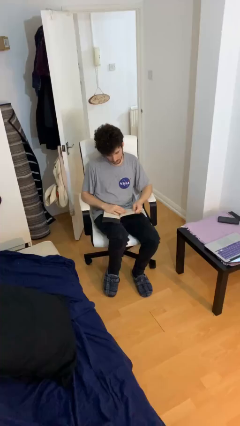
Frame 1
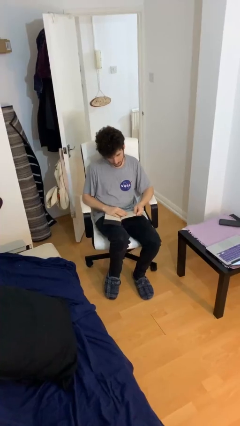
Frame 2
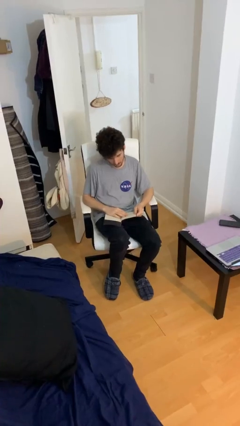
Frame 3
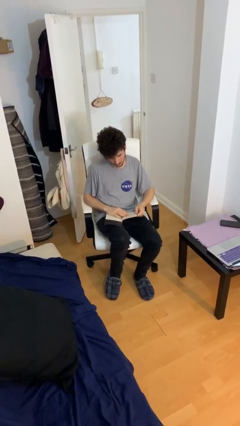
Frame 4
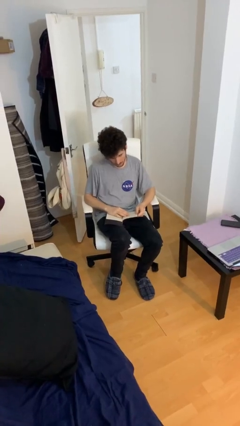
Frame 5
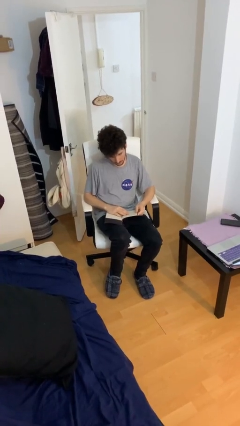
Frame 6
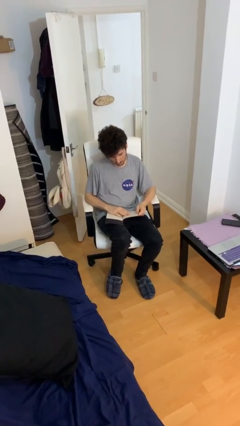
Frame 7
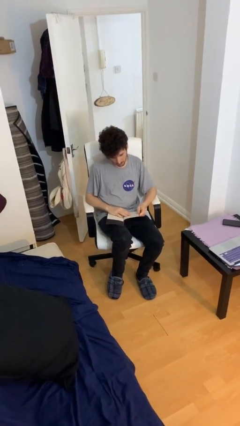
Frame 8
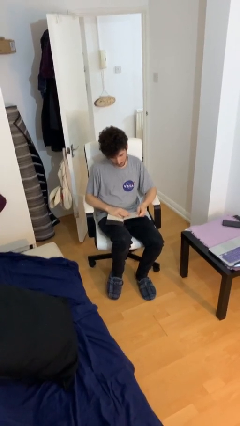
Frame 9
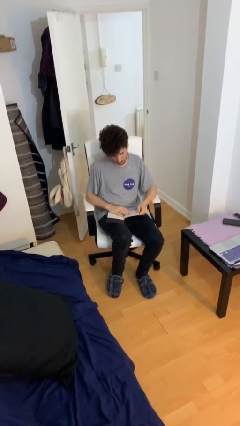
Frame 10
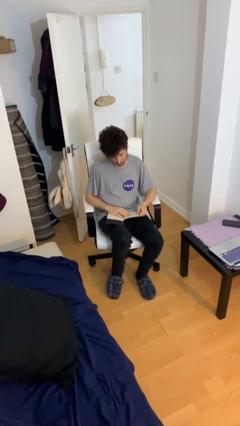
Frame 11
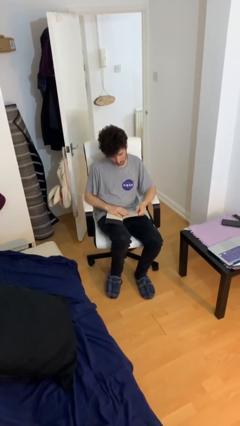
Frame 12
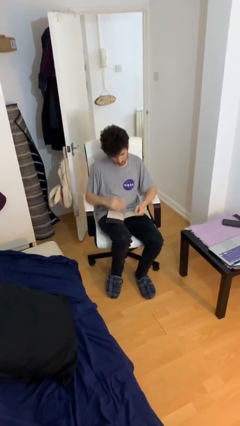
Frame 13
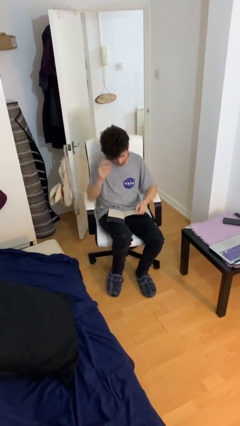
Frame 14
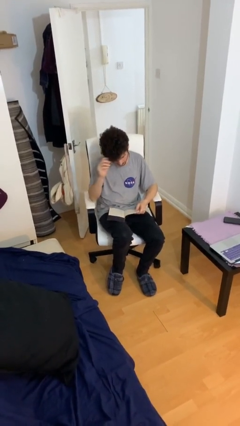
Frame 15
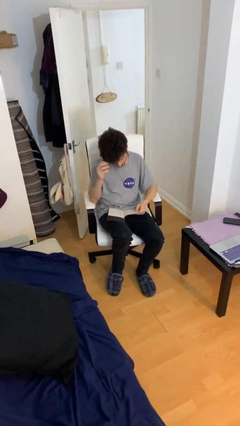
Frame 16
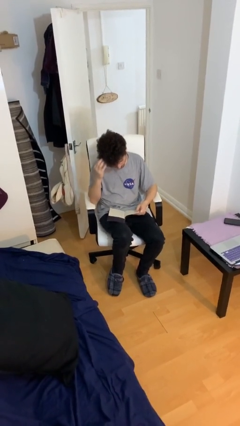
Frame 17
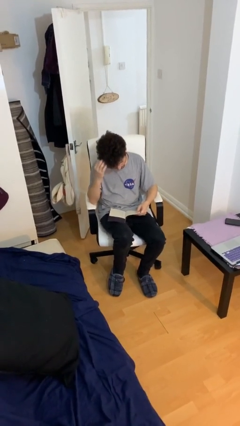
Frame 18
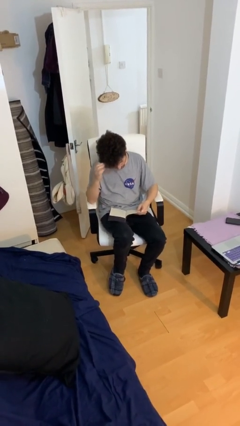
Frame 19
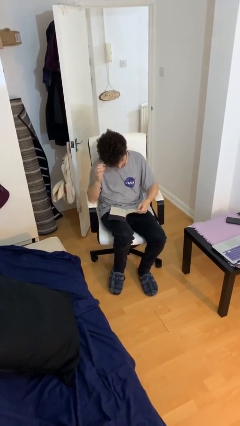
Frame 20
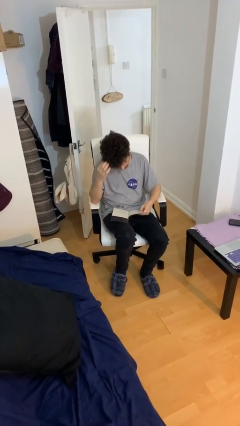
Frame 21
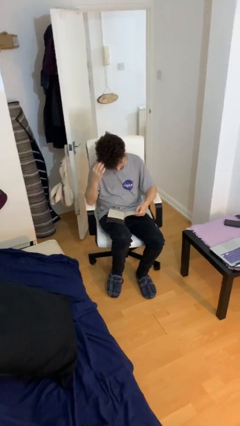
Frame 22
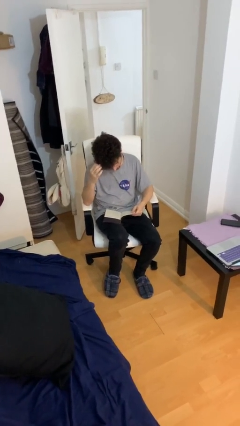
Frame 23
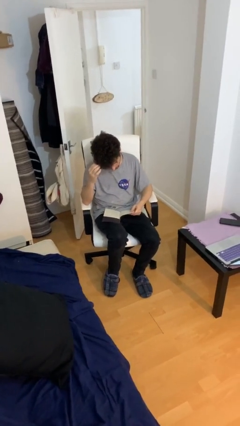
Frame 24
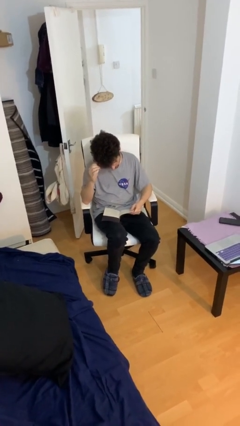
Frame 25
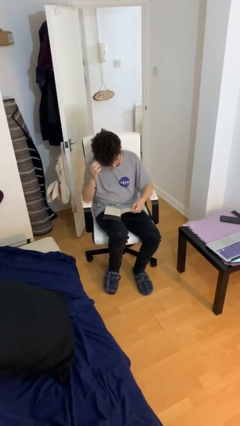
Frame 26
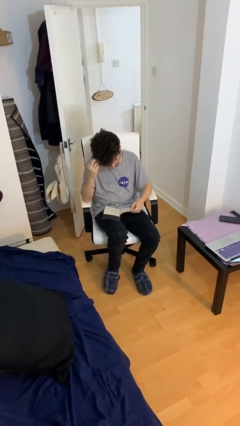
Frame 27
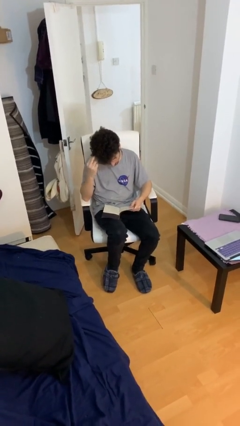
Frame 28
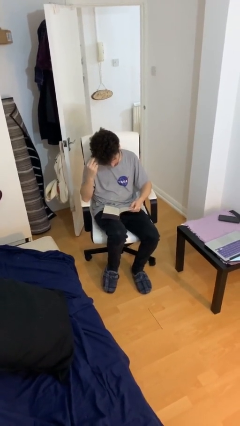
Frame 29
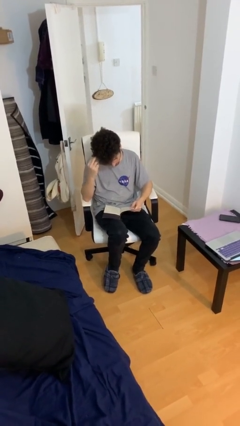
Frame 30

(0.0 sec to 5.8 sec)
person reads document

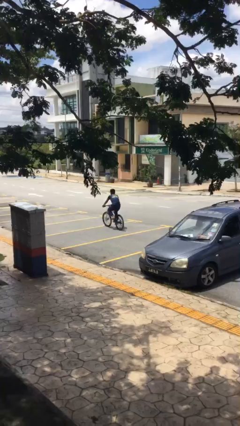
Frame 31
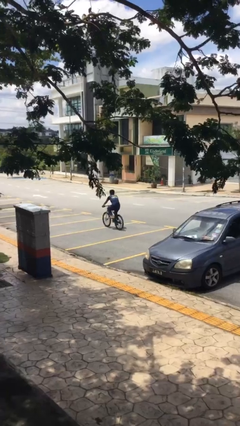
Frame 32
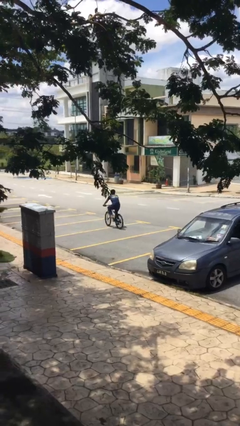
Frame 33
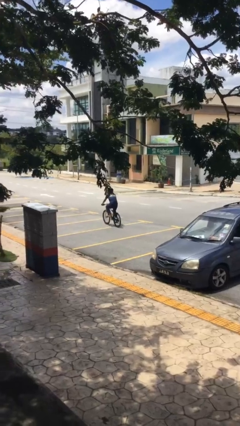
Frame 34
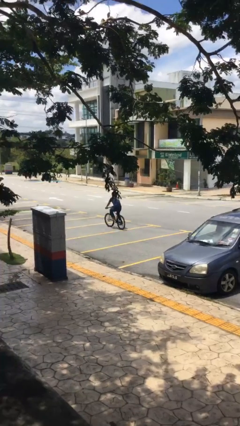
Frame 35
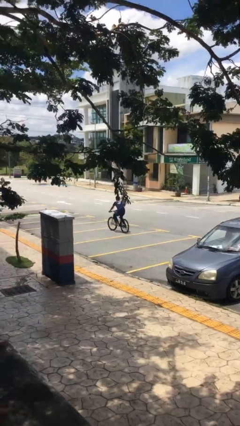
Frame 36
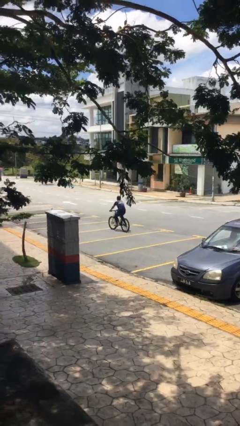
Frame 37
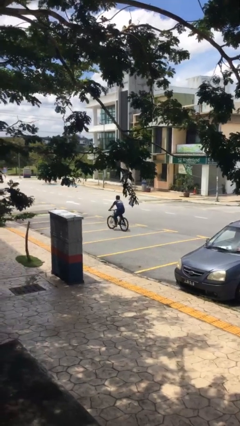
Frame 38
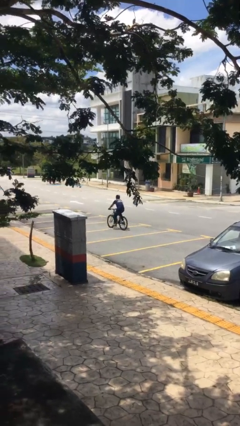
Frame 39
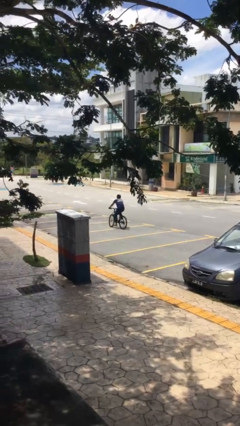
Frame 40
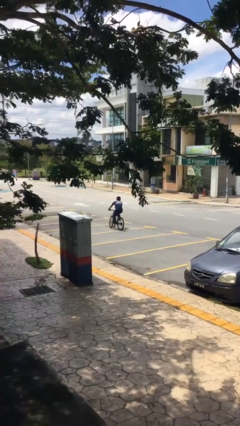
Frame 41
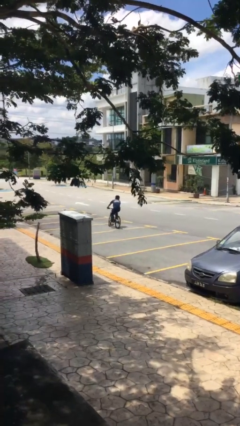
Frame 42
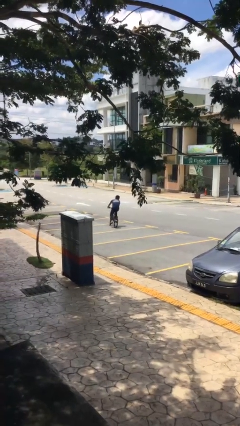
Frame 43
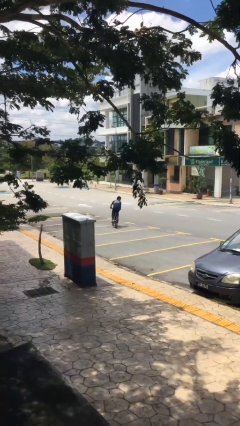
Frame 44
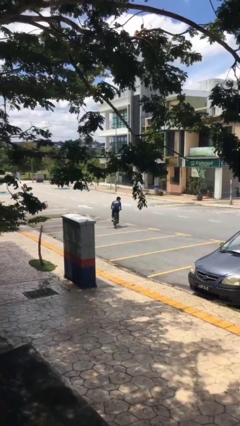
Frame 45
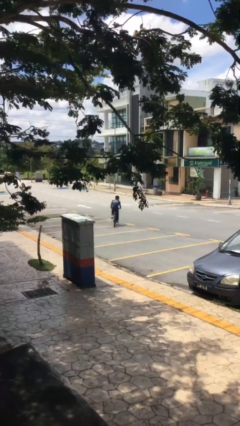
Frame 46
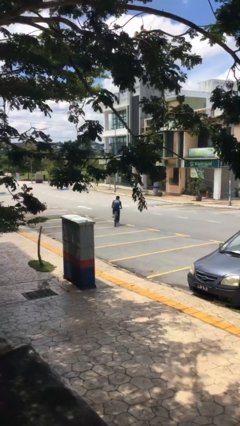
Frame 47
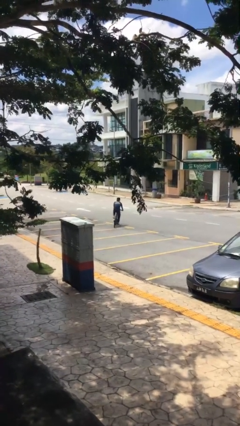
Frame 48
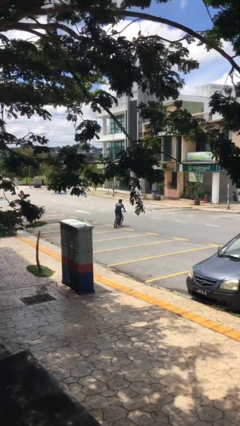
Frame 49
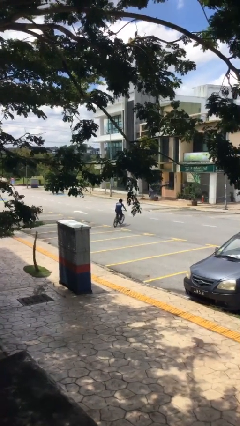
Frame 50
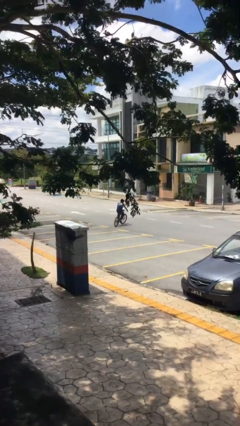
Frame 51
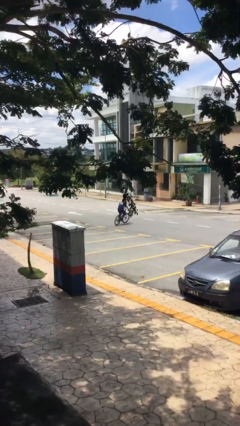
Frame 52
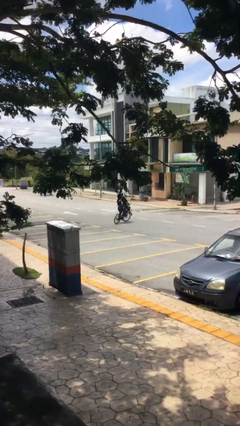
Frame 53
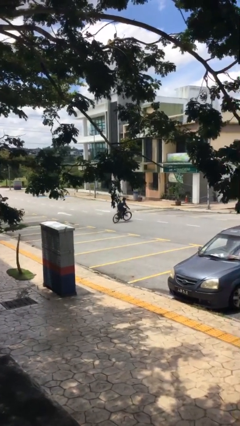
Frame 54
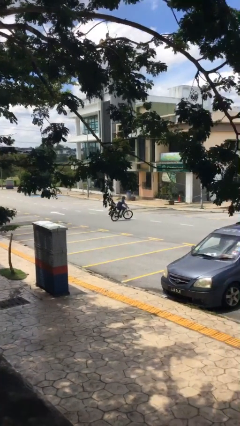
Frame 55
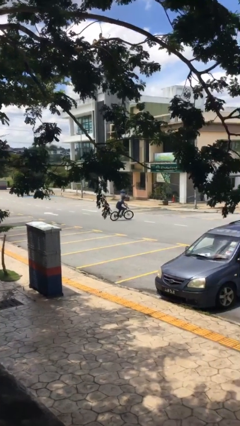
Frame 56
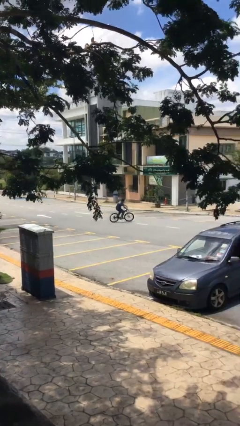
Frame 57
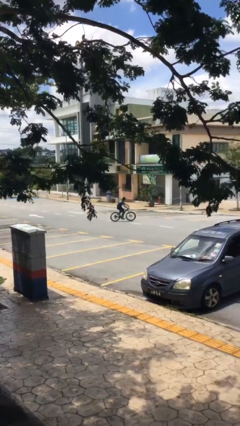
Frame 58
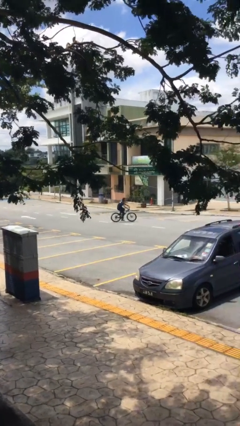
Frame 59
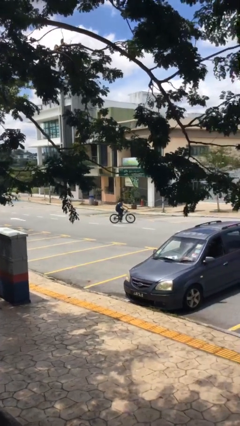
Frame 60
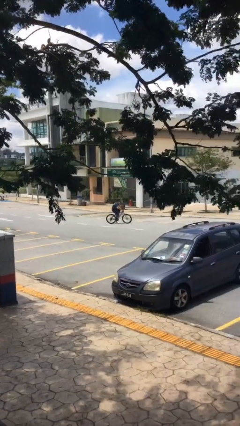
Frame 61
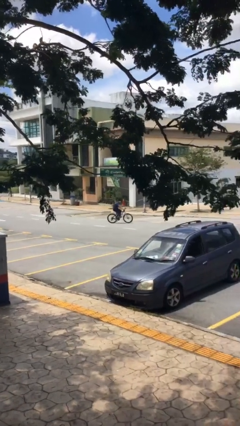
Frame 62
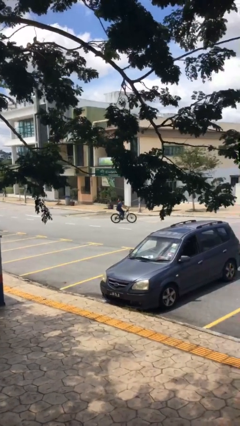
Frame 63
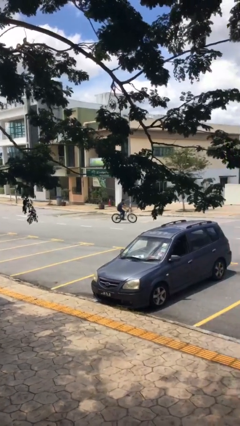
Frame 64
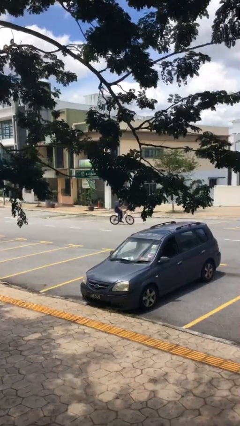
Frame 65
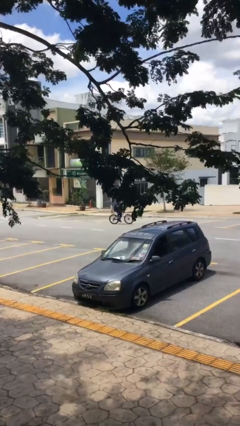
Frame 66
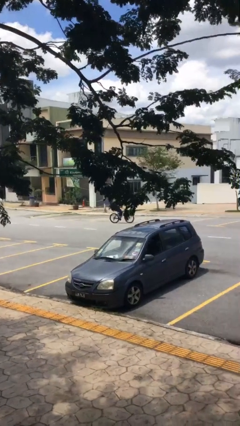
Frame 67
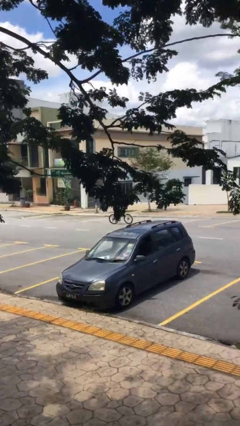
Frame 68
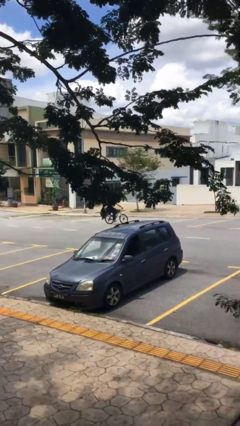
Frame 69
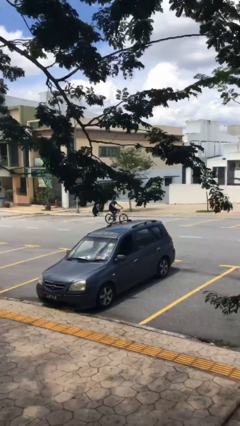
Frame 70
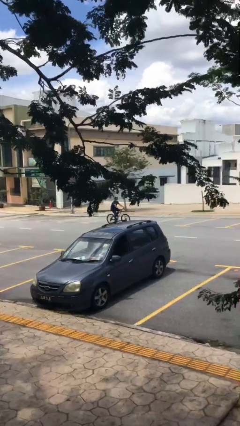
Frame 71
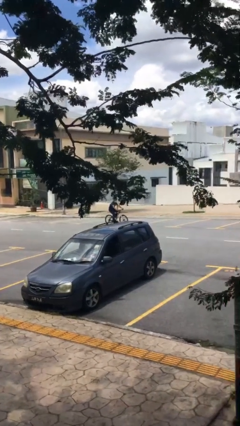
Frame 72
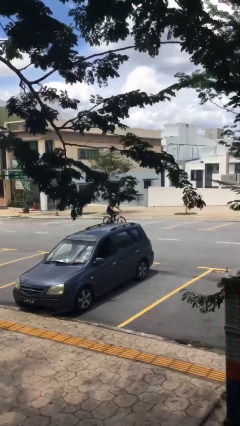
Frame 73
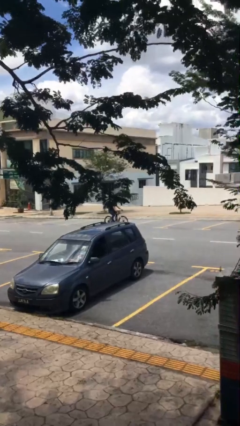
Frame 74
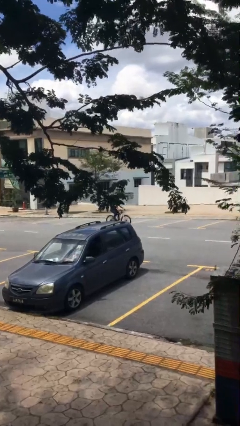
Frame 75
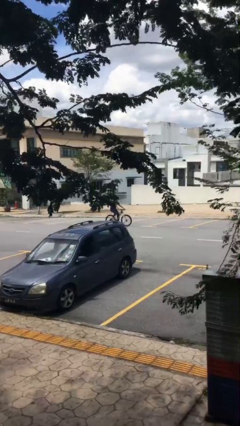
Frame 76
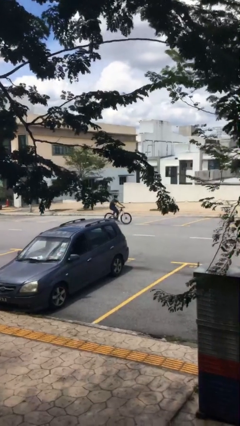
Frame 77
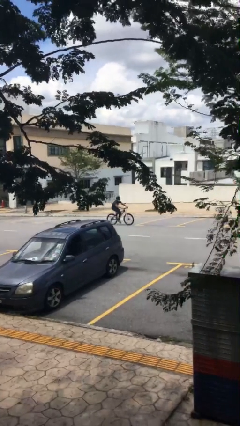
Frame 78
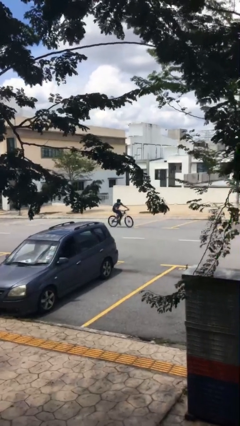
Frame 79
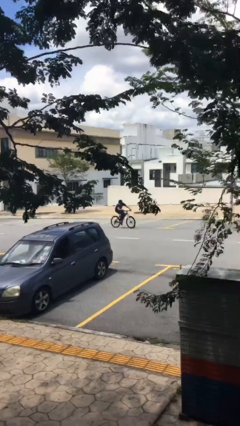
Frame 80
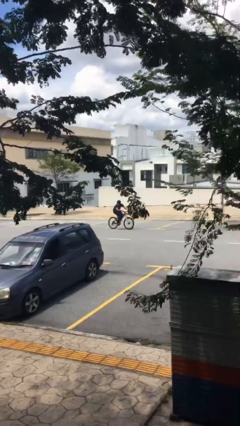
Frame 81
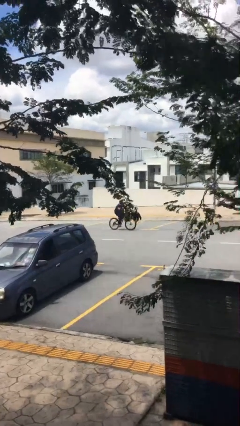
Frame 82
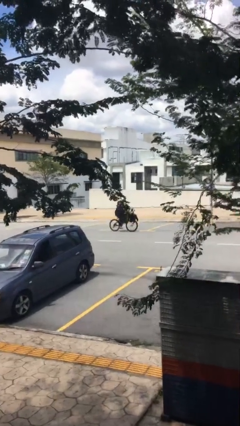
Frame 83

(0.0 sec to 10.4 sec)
person rides bicycle

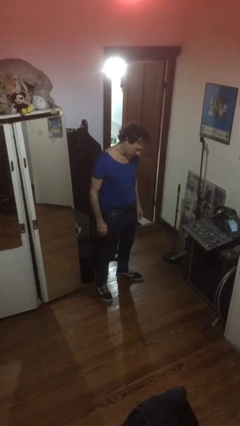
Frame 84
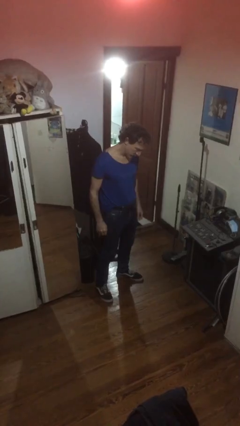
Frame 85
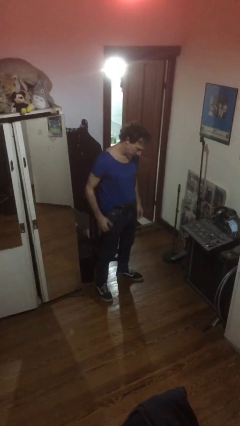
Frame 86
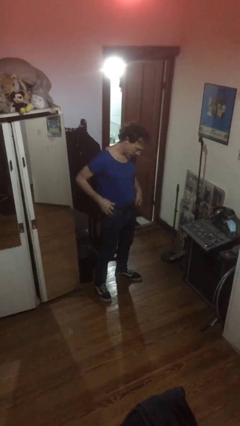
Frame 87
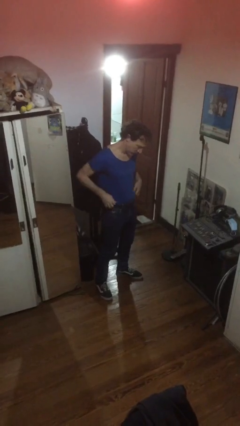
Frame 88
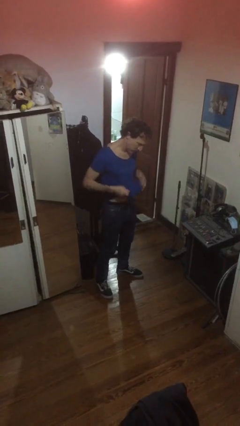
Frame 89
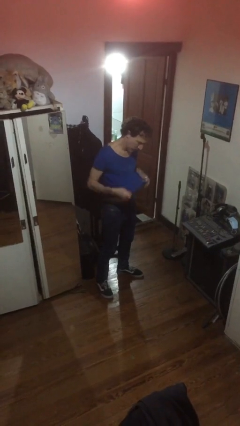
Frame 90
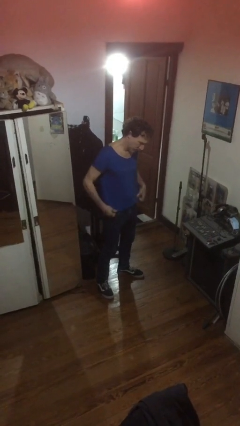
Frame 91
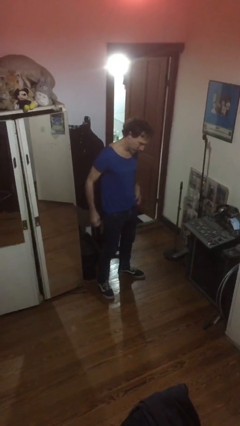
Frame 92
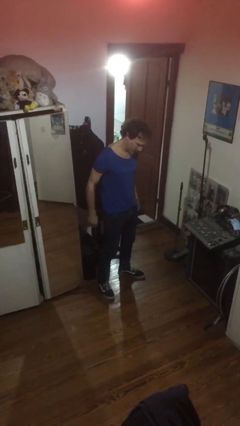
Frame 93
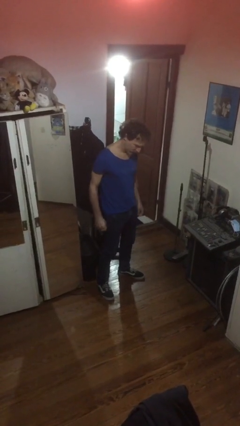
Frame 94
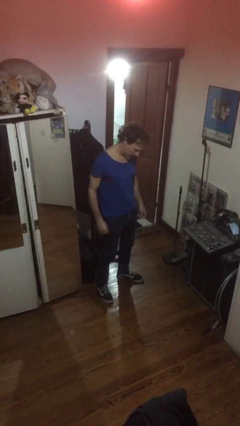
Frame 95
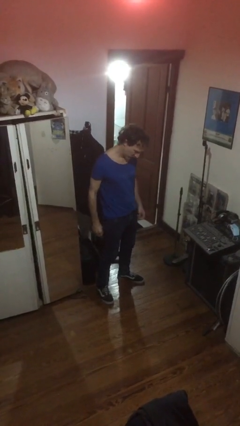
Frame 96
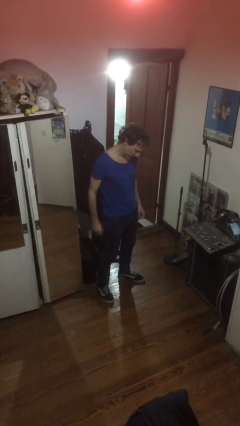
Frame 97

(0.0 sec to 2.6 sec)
person untucks shirt
